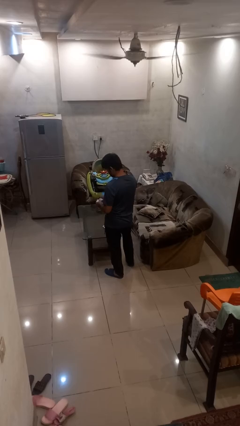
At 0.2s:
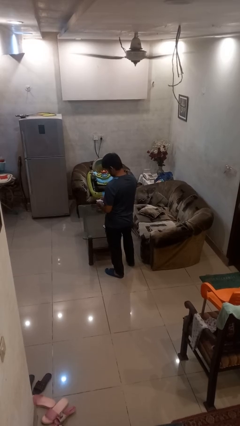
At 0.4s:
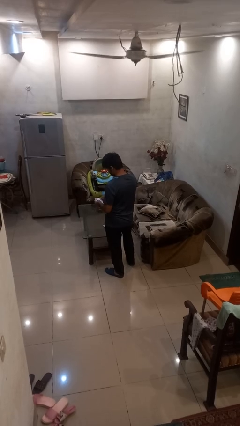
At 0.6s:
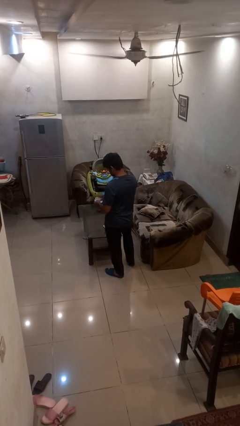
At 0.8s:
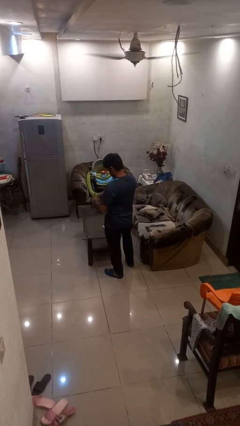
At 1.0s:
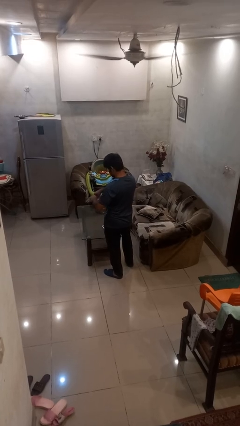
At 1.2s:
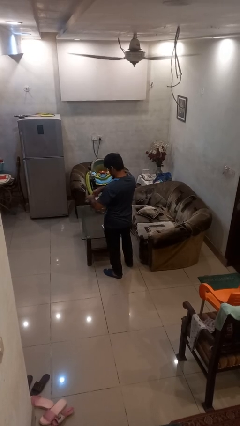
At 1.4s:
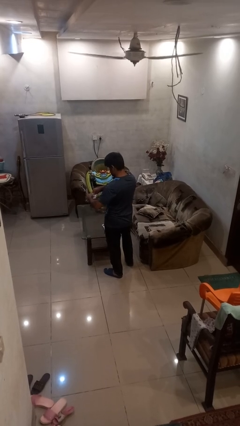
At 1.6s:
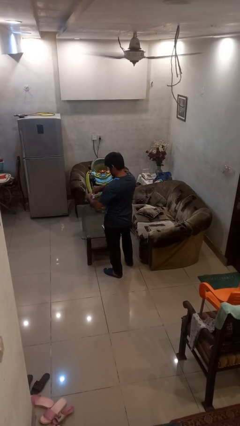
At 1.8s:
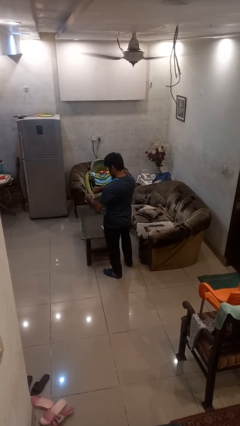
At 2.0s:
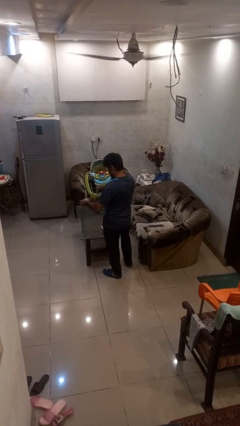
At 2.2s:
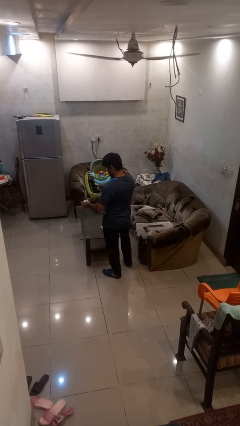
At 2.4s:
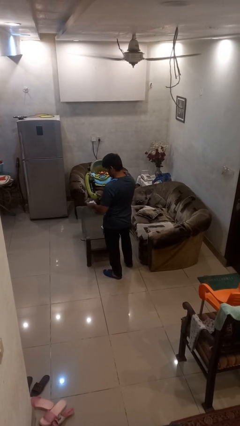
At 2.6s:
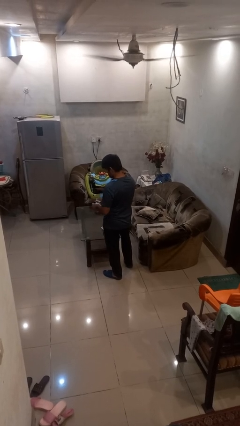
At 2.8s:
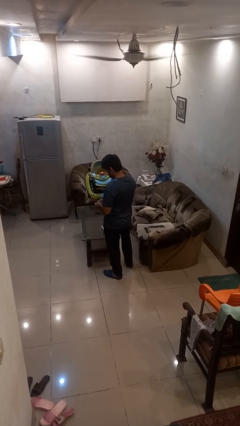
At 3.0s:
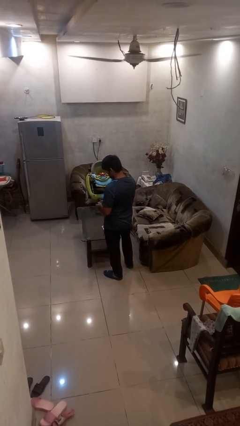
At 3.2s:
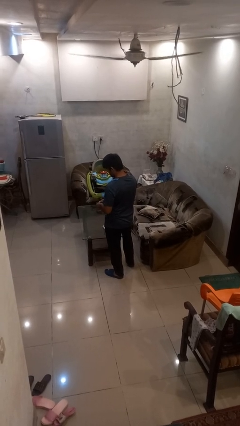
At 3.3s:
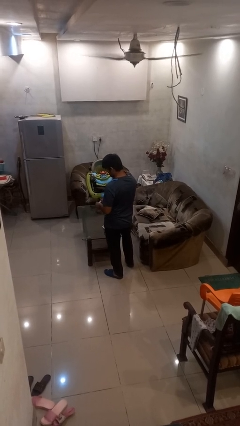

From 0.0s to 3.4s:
person tears paper

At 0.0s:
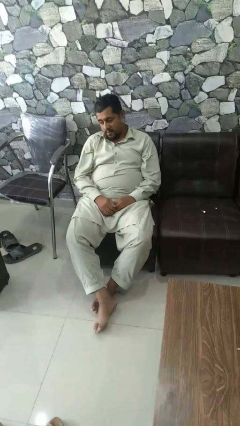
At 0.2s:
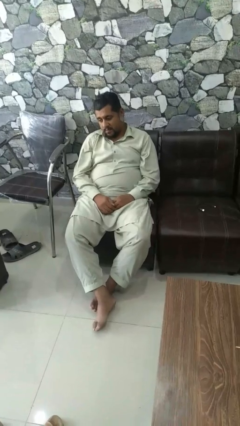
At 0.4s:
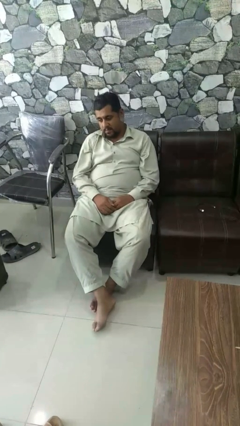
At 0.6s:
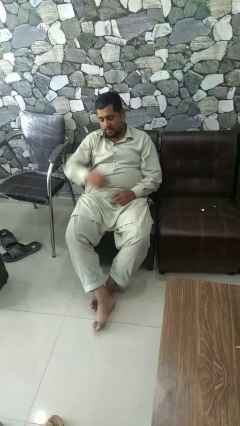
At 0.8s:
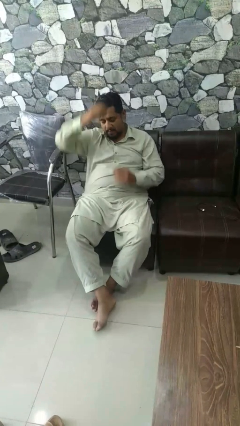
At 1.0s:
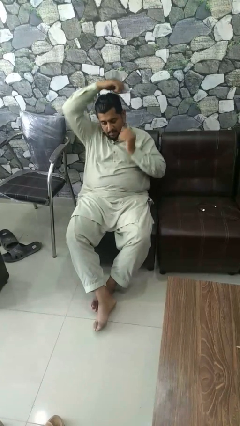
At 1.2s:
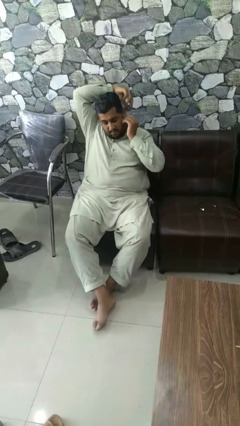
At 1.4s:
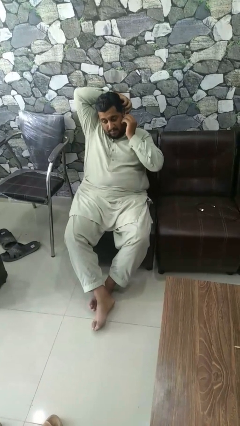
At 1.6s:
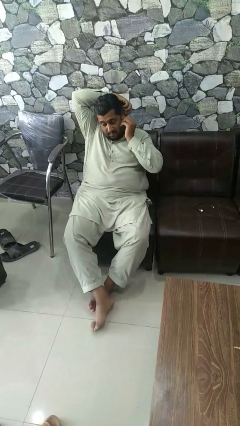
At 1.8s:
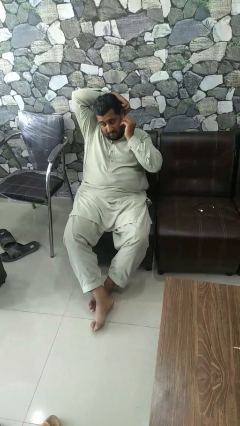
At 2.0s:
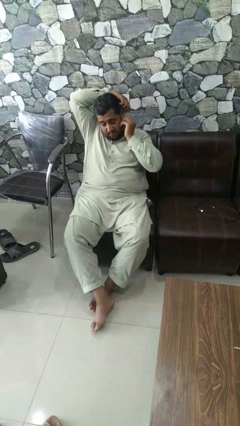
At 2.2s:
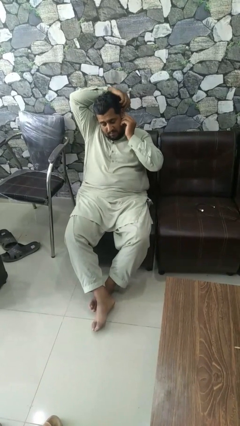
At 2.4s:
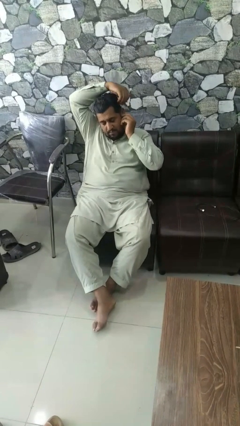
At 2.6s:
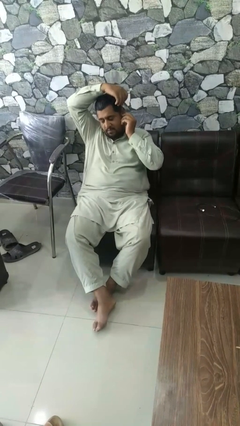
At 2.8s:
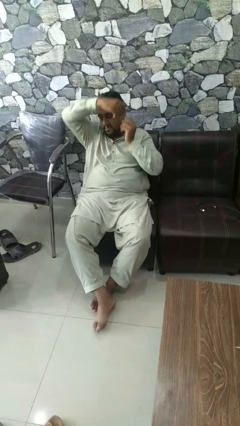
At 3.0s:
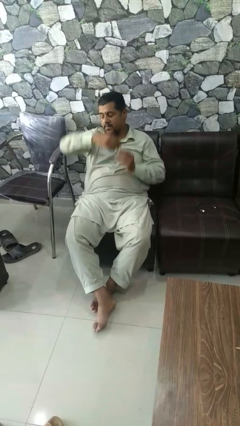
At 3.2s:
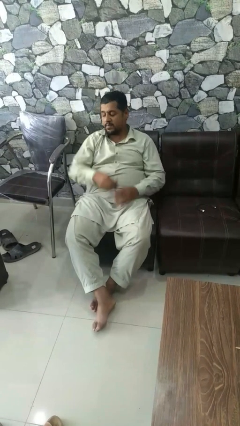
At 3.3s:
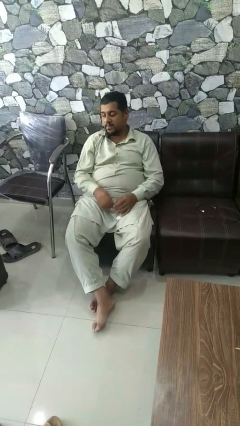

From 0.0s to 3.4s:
person takes off earrings

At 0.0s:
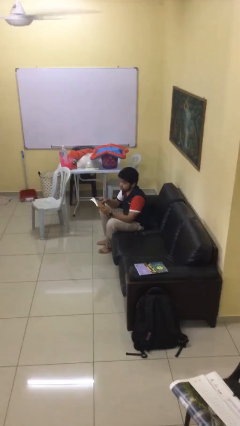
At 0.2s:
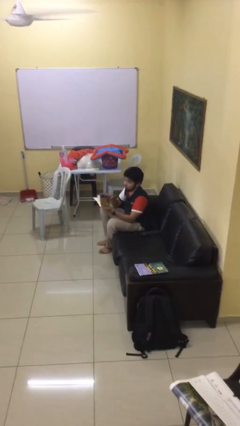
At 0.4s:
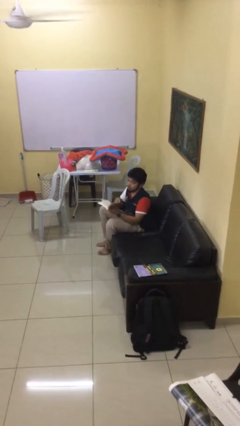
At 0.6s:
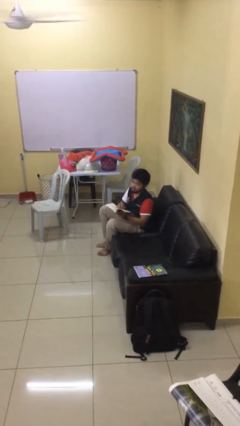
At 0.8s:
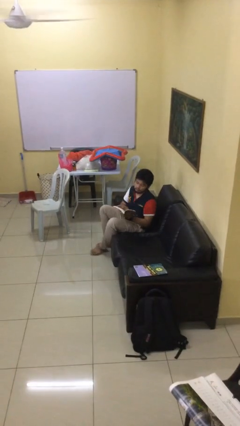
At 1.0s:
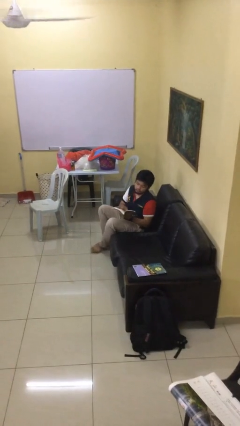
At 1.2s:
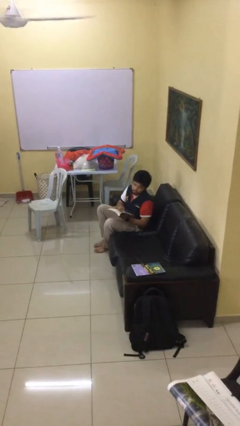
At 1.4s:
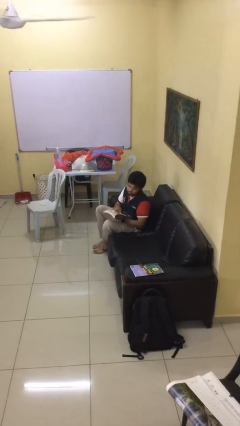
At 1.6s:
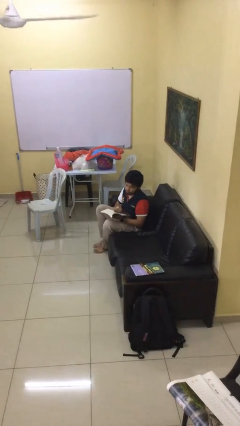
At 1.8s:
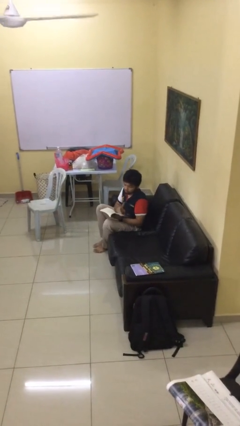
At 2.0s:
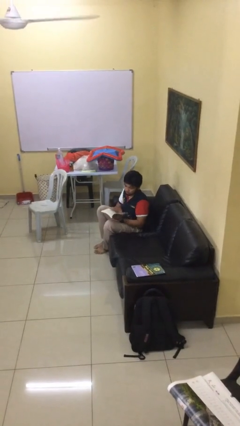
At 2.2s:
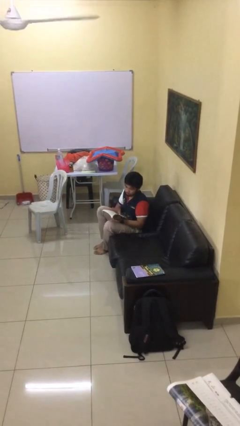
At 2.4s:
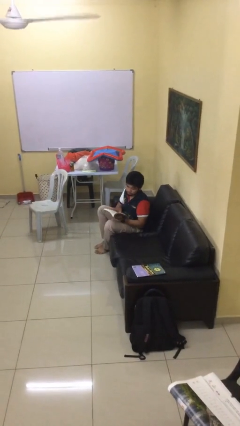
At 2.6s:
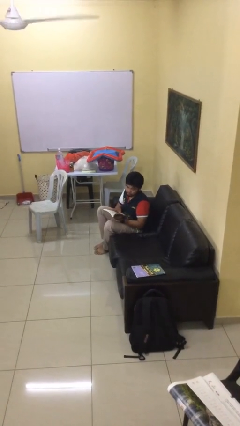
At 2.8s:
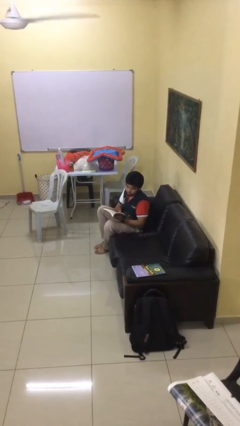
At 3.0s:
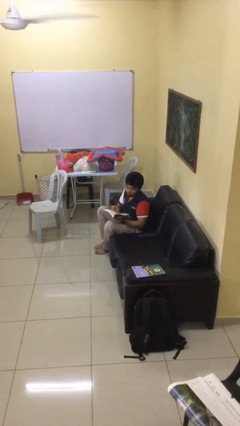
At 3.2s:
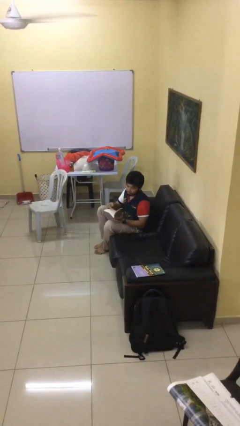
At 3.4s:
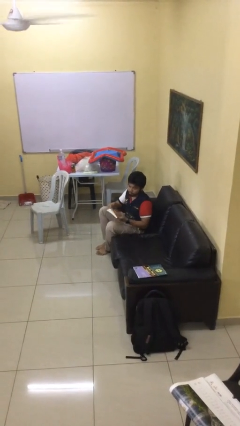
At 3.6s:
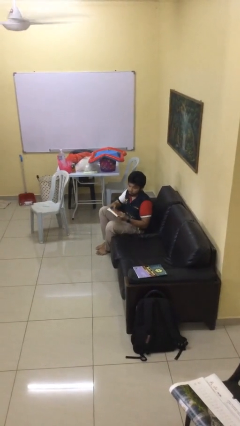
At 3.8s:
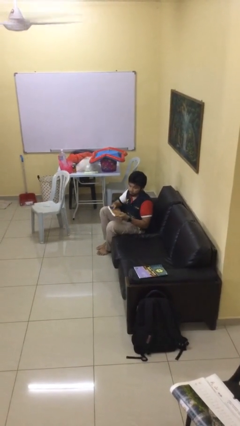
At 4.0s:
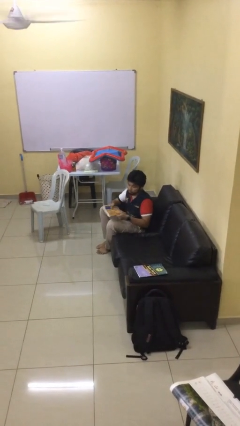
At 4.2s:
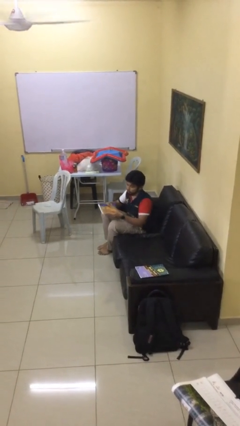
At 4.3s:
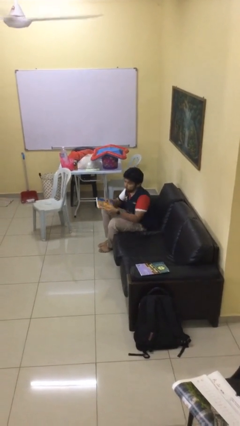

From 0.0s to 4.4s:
person reads book

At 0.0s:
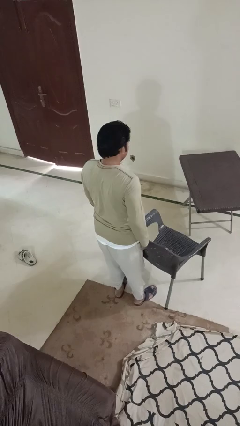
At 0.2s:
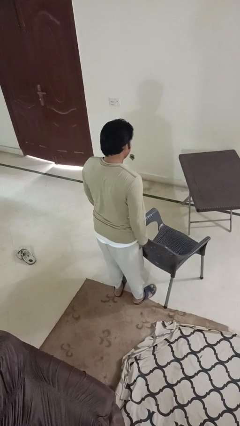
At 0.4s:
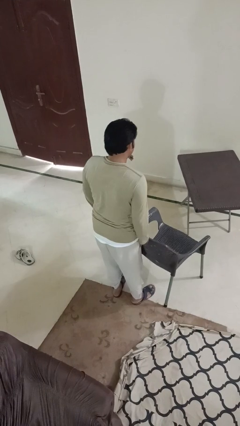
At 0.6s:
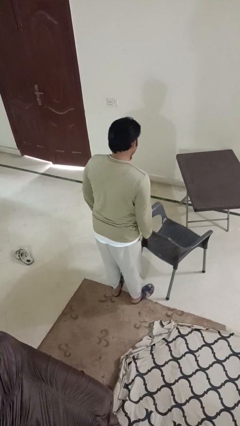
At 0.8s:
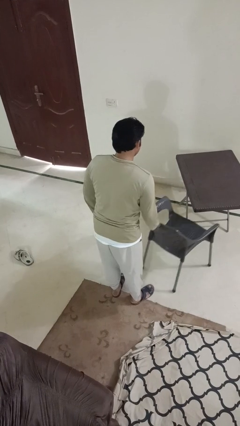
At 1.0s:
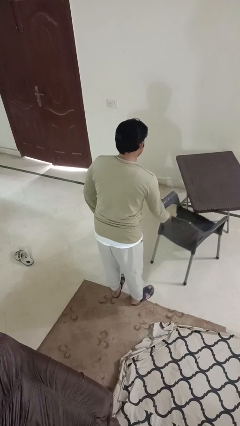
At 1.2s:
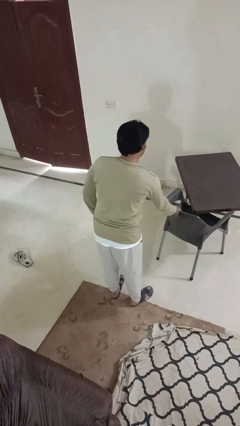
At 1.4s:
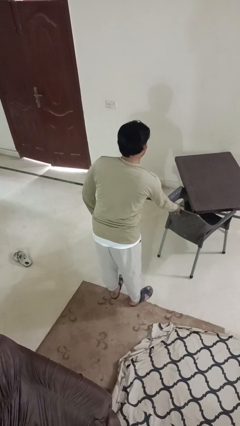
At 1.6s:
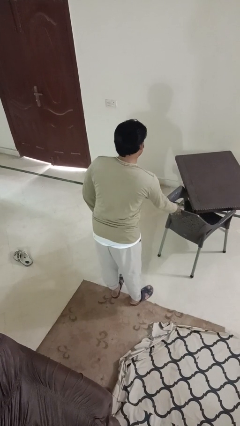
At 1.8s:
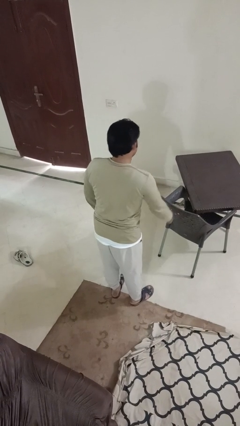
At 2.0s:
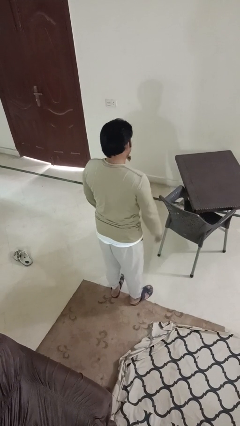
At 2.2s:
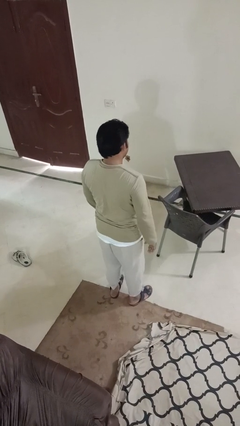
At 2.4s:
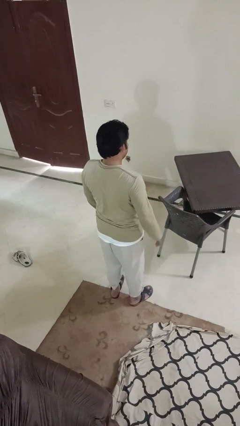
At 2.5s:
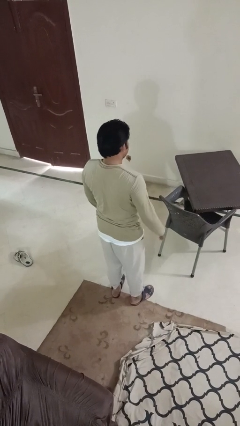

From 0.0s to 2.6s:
person pushes in chair

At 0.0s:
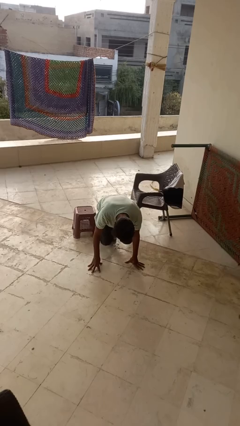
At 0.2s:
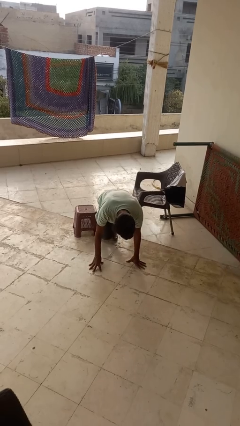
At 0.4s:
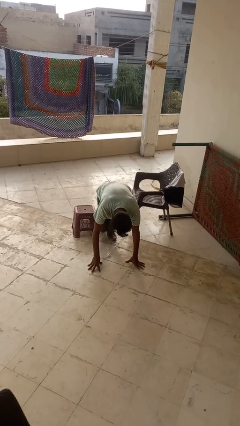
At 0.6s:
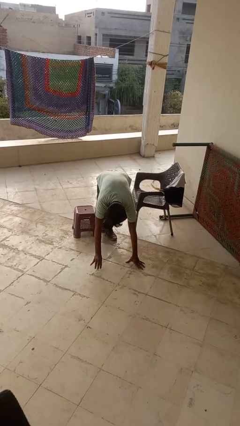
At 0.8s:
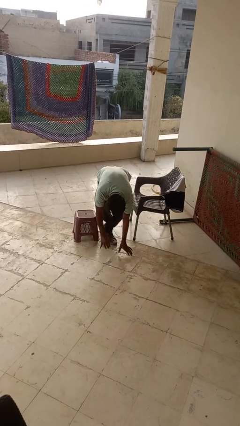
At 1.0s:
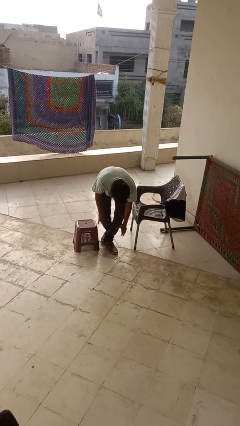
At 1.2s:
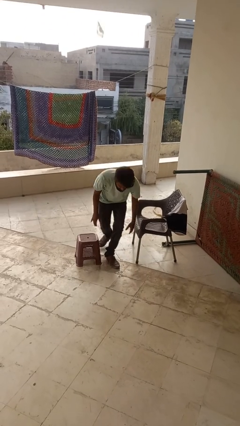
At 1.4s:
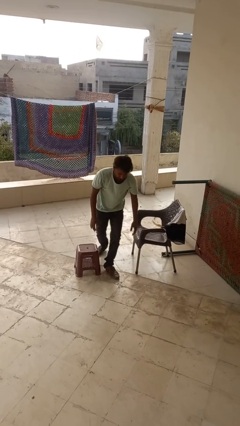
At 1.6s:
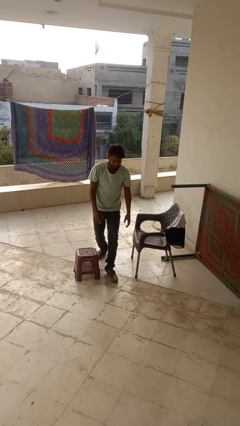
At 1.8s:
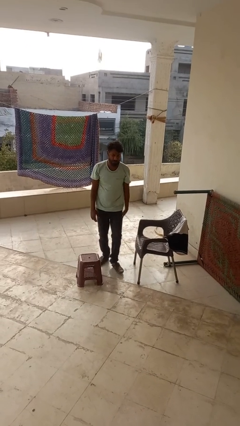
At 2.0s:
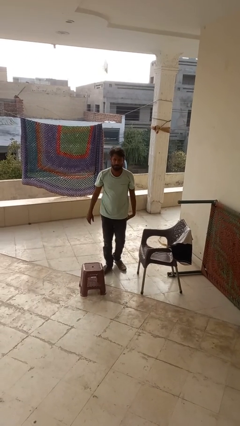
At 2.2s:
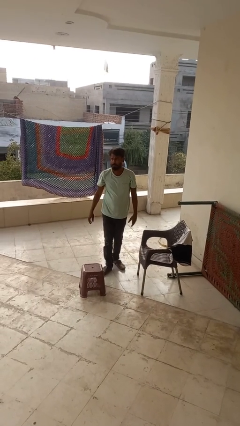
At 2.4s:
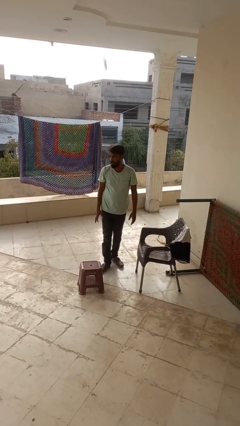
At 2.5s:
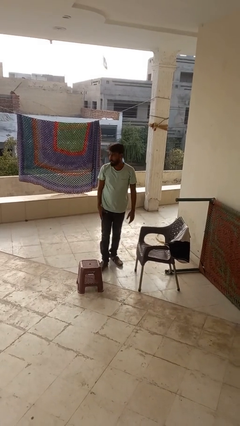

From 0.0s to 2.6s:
person stands up from floor

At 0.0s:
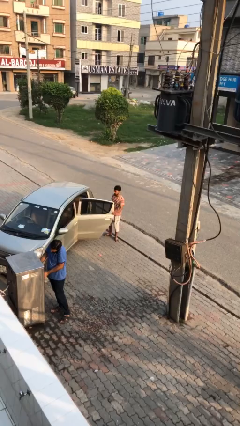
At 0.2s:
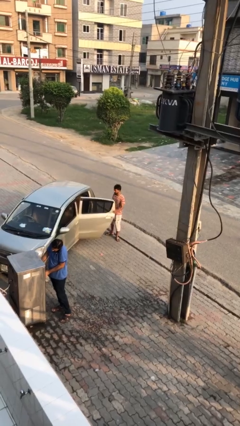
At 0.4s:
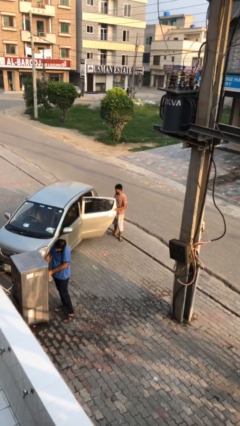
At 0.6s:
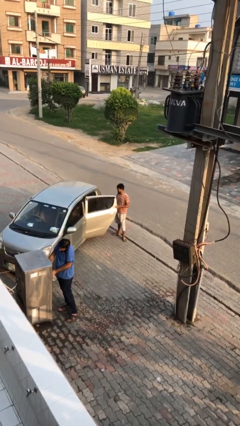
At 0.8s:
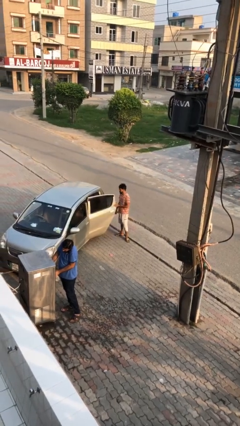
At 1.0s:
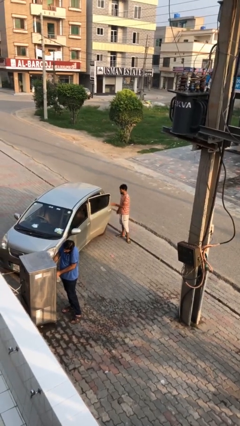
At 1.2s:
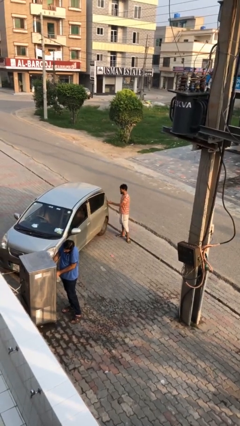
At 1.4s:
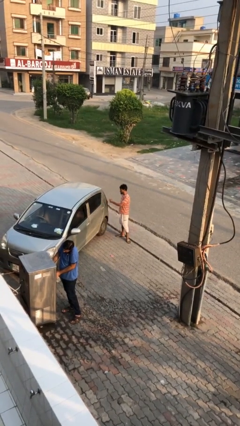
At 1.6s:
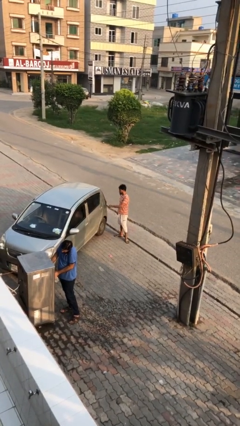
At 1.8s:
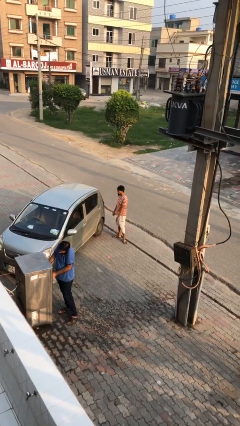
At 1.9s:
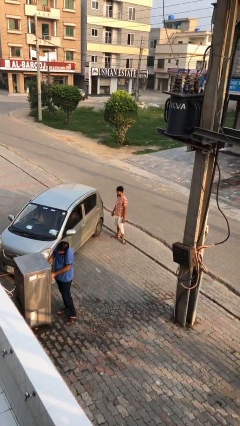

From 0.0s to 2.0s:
person closes car door
